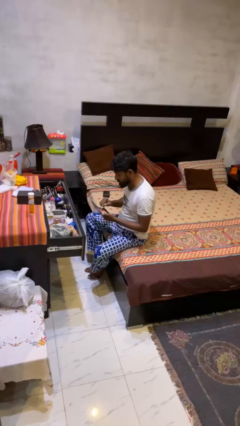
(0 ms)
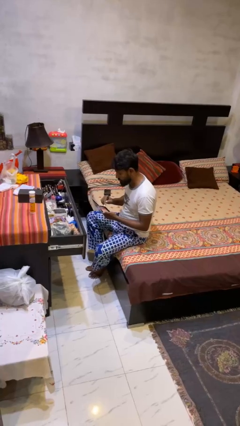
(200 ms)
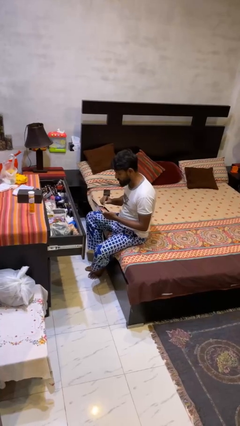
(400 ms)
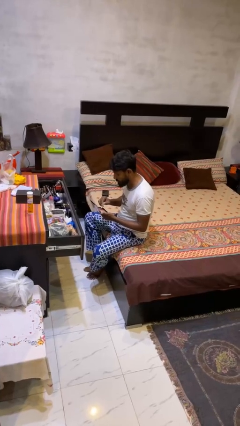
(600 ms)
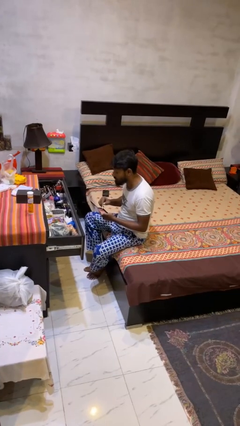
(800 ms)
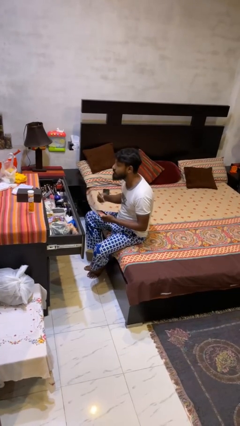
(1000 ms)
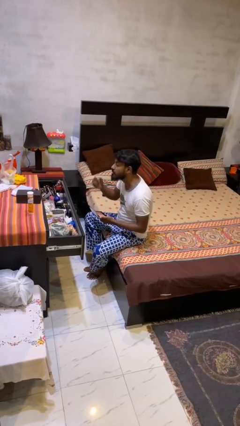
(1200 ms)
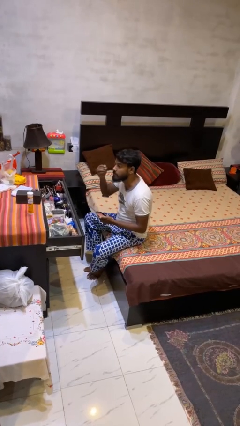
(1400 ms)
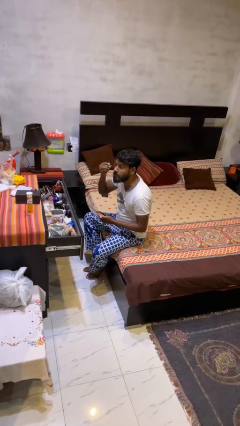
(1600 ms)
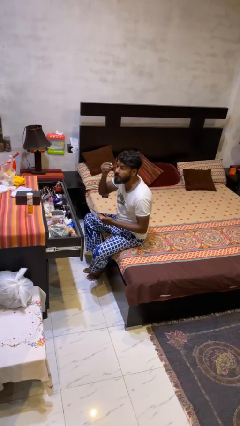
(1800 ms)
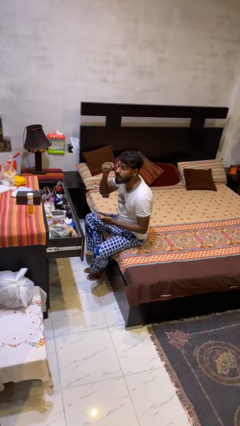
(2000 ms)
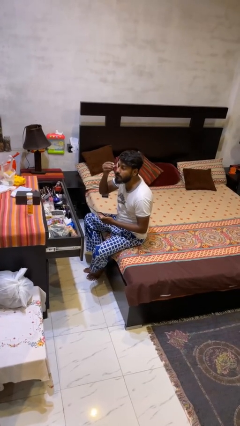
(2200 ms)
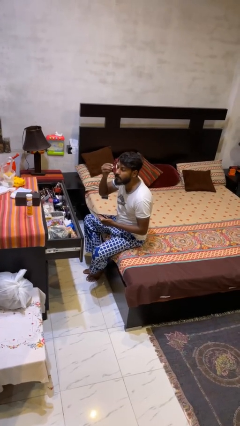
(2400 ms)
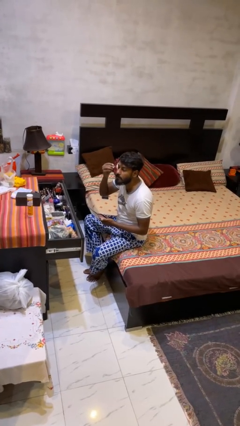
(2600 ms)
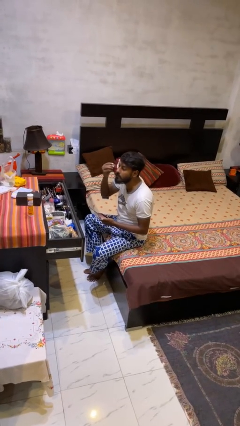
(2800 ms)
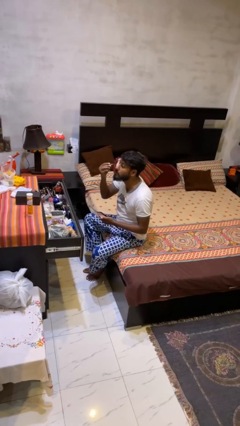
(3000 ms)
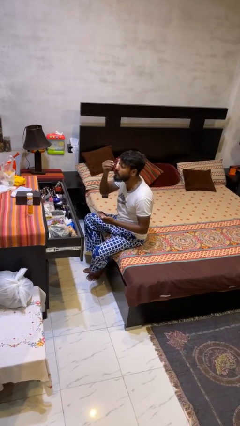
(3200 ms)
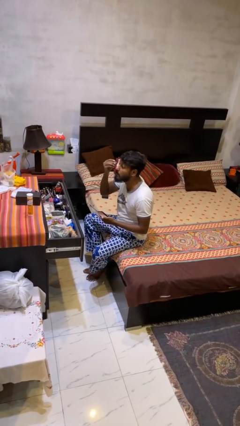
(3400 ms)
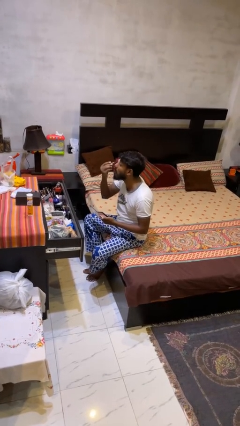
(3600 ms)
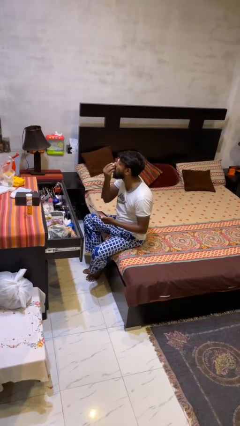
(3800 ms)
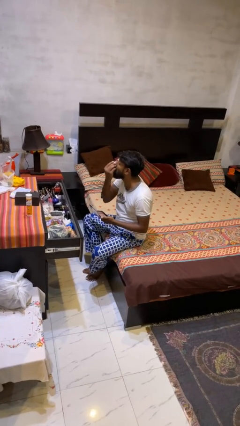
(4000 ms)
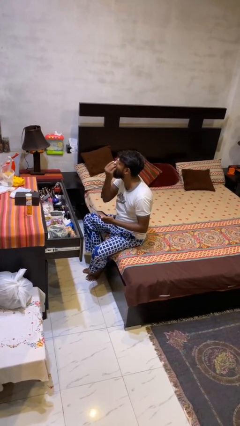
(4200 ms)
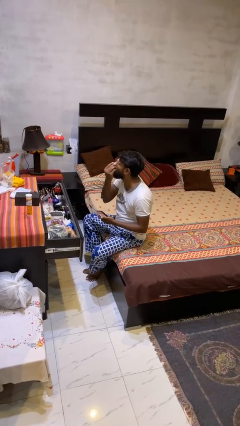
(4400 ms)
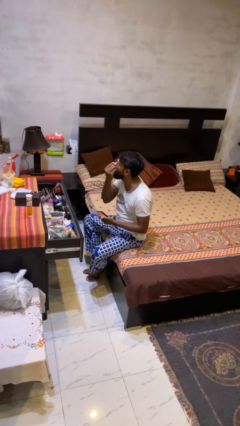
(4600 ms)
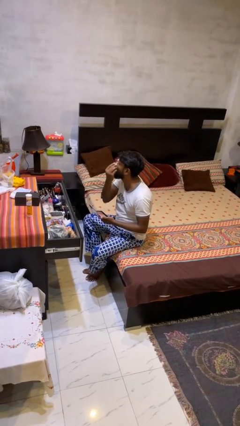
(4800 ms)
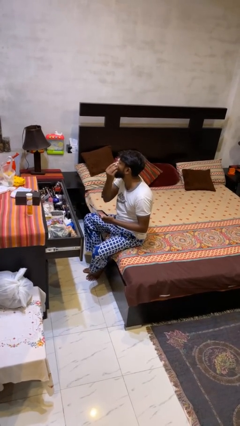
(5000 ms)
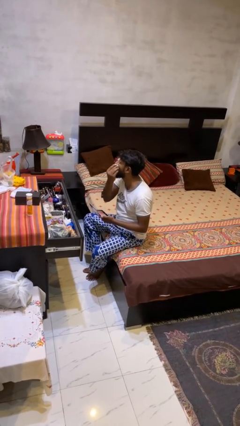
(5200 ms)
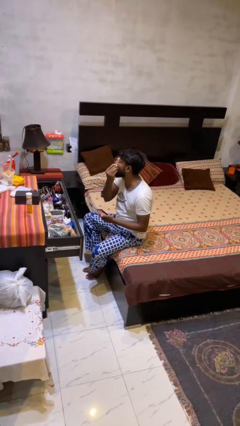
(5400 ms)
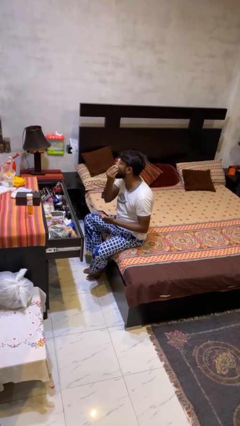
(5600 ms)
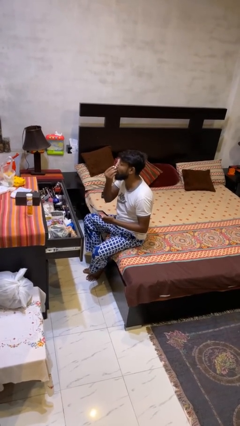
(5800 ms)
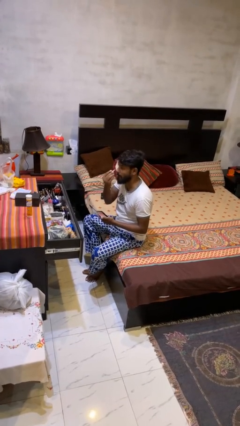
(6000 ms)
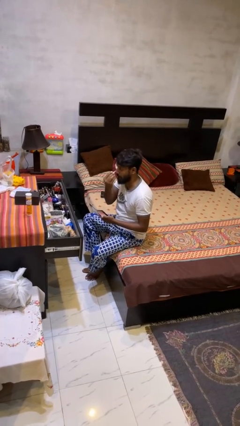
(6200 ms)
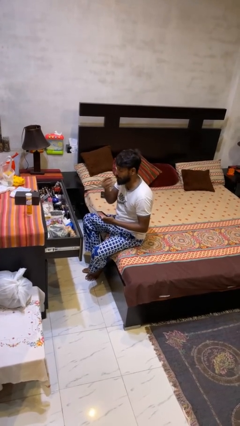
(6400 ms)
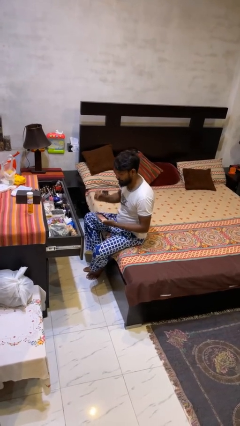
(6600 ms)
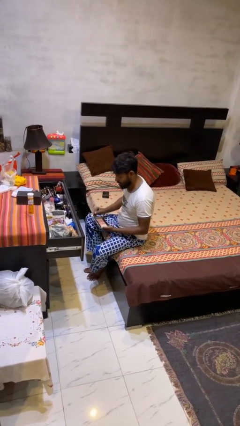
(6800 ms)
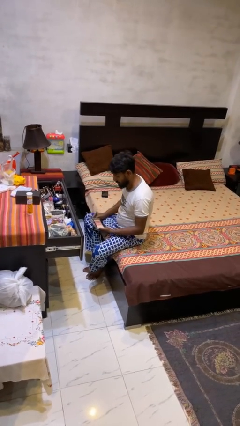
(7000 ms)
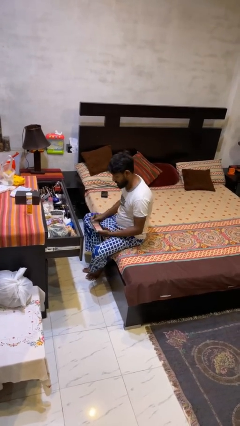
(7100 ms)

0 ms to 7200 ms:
person applies eye makeup

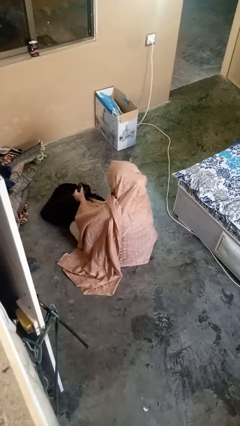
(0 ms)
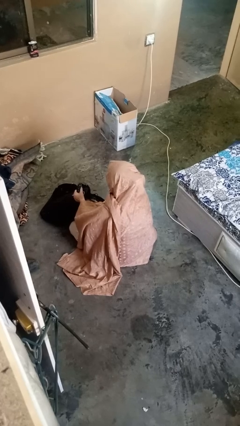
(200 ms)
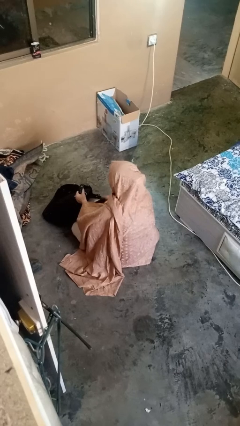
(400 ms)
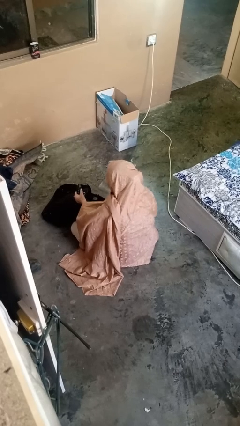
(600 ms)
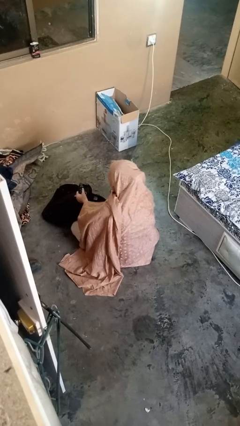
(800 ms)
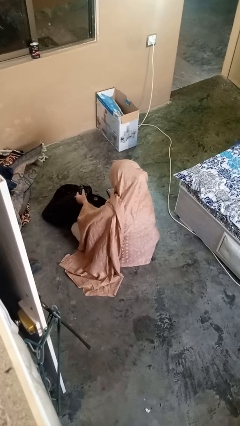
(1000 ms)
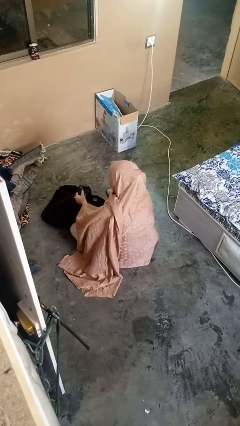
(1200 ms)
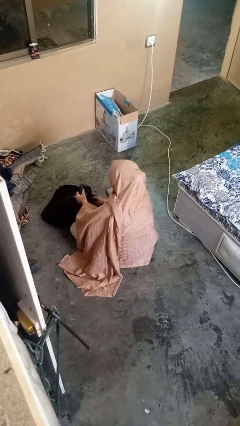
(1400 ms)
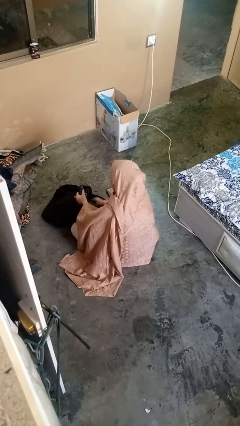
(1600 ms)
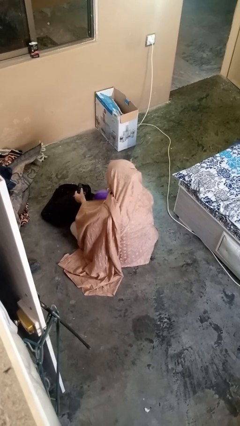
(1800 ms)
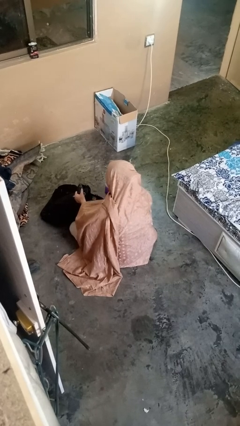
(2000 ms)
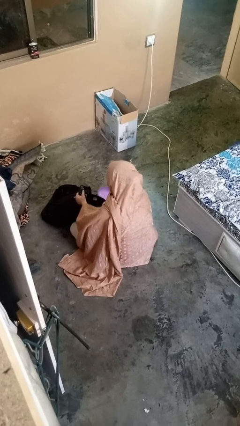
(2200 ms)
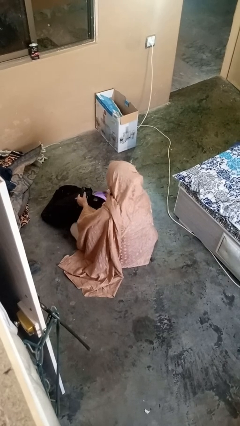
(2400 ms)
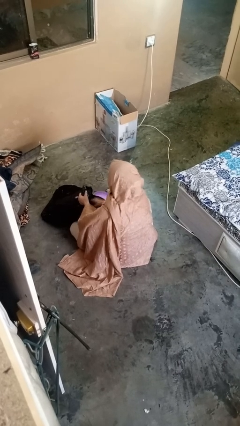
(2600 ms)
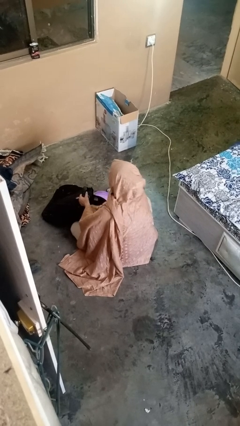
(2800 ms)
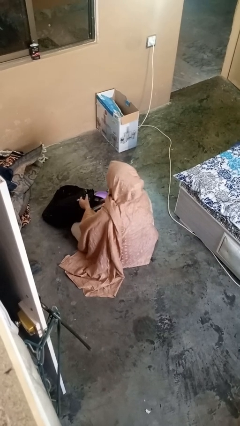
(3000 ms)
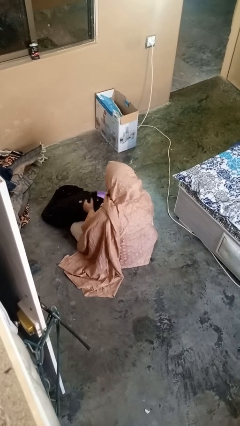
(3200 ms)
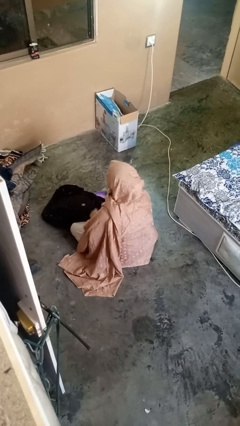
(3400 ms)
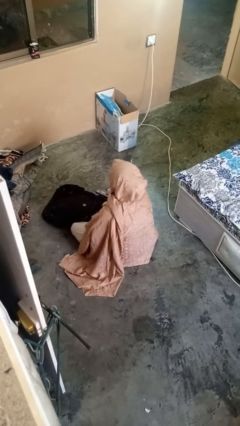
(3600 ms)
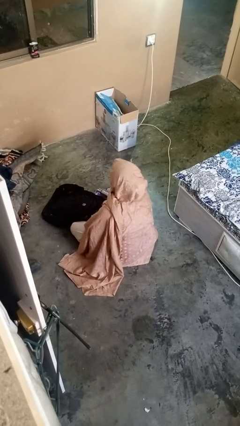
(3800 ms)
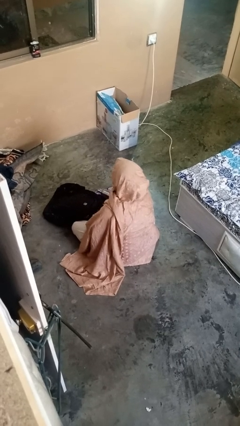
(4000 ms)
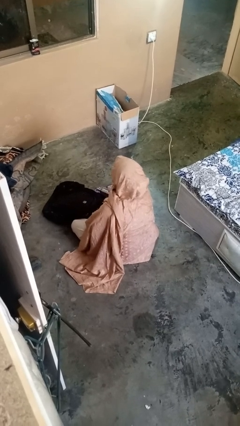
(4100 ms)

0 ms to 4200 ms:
person takes object from backpack

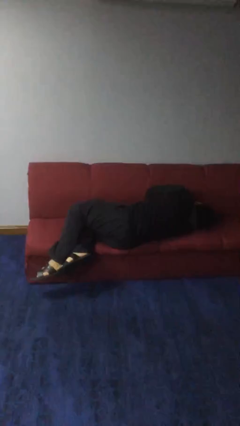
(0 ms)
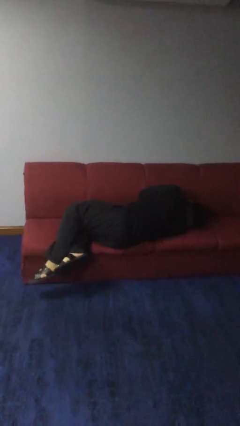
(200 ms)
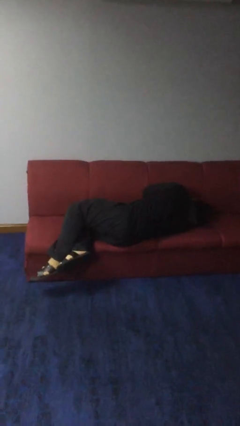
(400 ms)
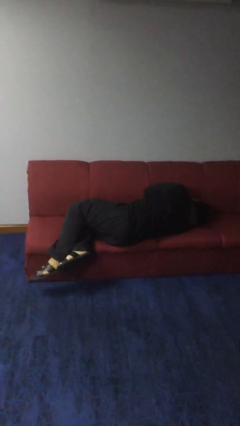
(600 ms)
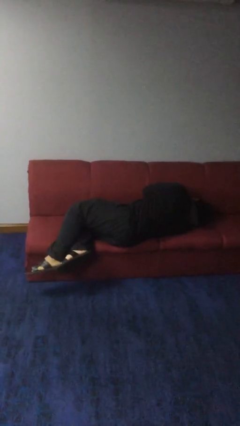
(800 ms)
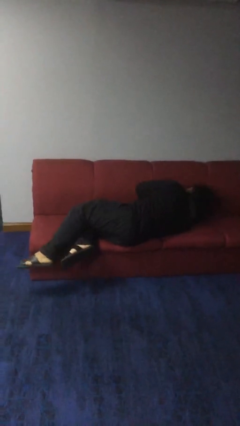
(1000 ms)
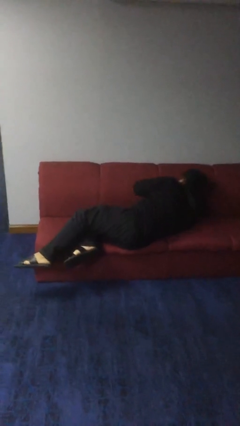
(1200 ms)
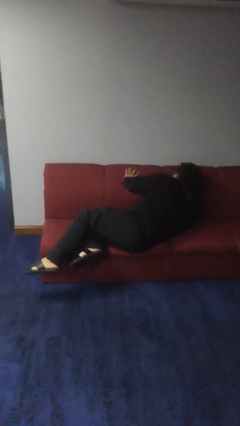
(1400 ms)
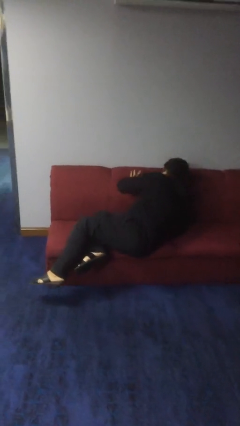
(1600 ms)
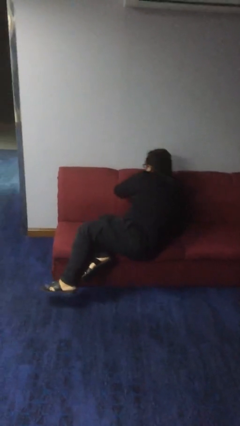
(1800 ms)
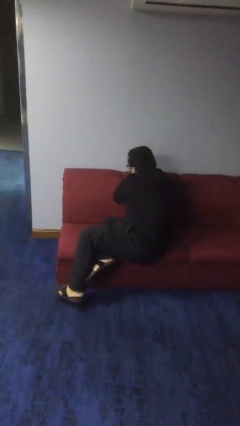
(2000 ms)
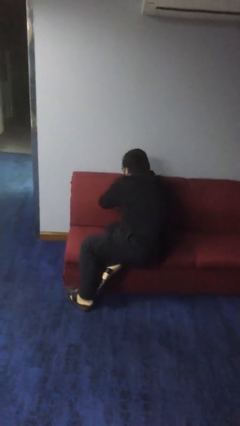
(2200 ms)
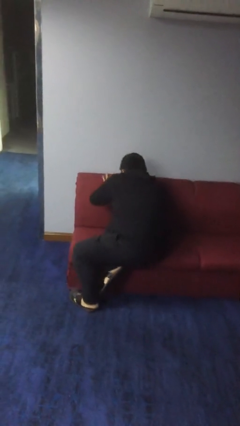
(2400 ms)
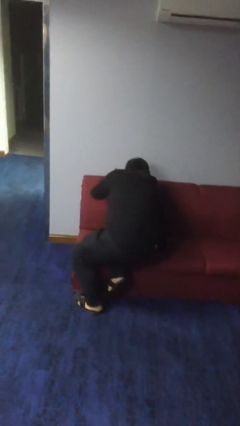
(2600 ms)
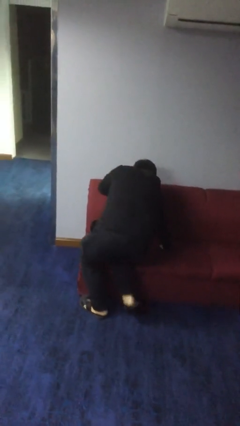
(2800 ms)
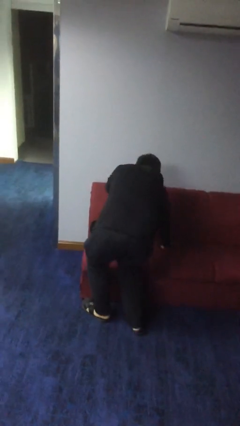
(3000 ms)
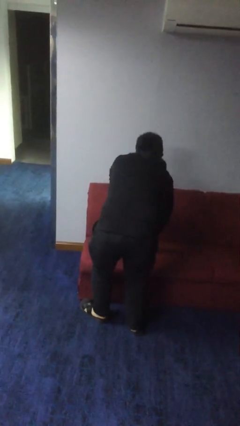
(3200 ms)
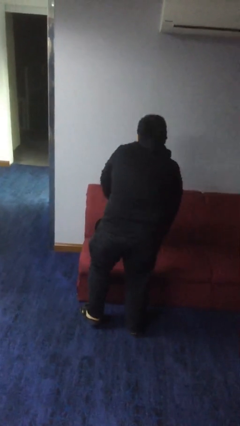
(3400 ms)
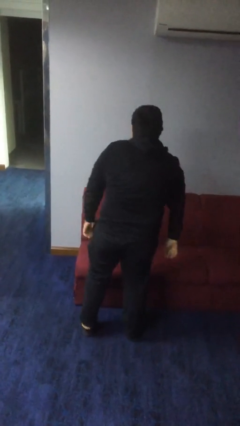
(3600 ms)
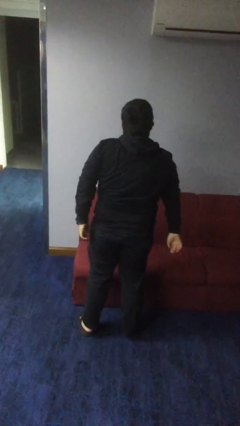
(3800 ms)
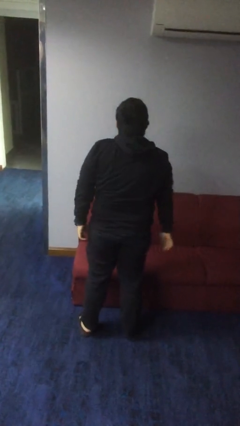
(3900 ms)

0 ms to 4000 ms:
person stands up

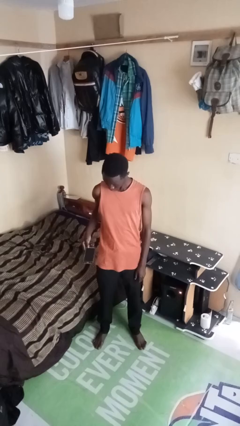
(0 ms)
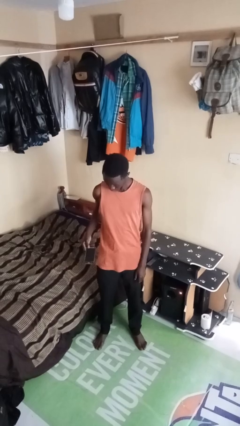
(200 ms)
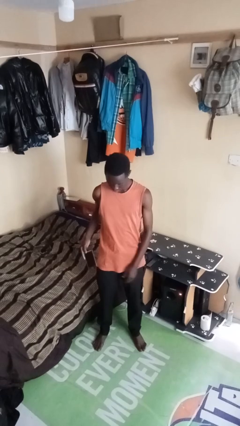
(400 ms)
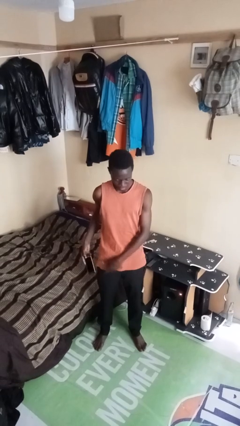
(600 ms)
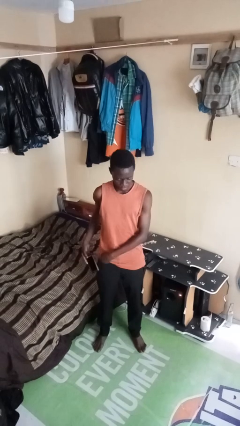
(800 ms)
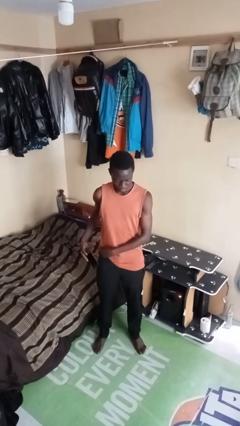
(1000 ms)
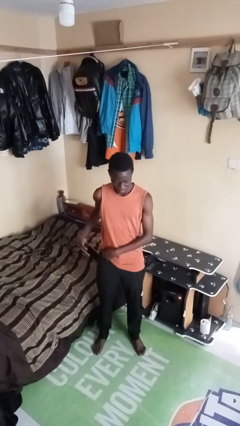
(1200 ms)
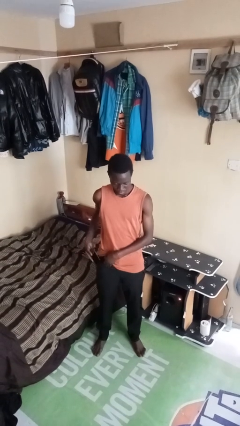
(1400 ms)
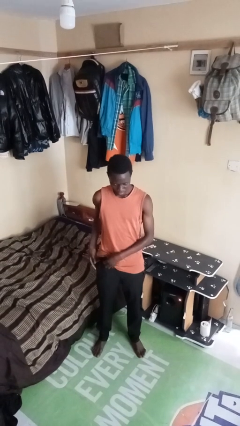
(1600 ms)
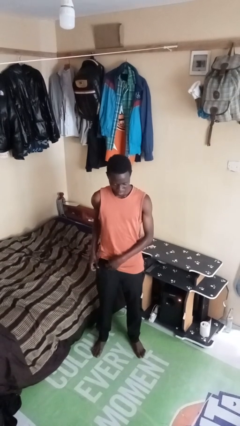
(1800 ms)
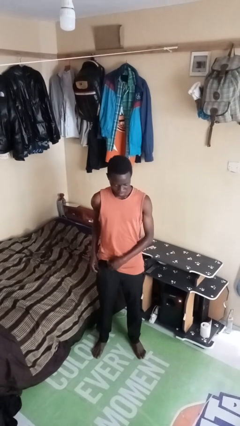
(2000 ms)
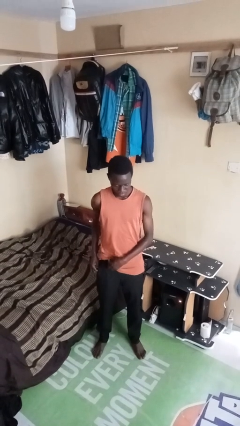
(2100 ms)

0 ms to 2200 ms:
person puts phone into pocket
